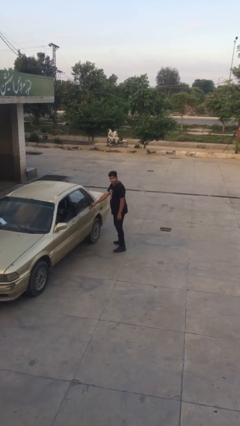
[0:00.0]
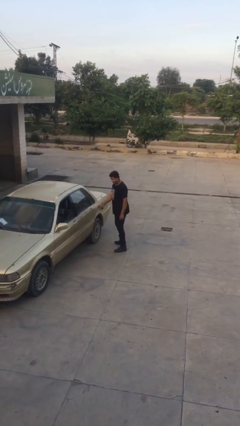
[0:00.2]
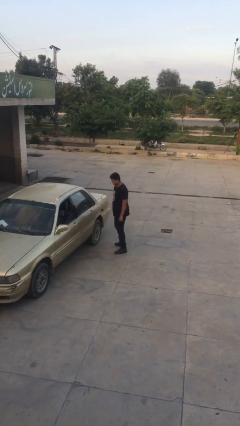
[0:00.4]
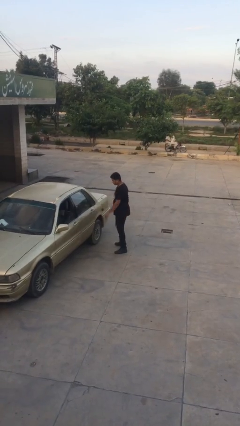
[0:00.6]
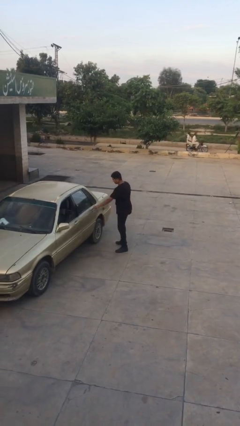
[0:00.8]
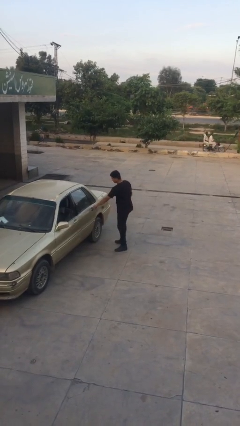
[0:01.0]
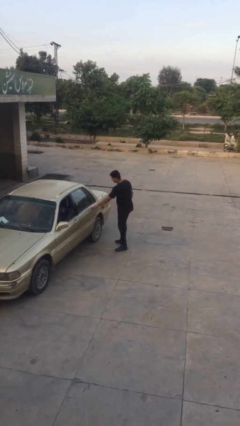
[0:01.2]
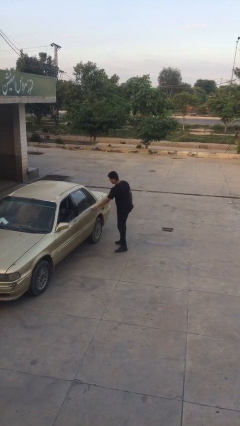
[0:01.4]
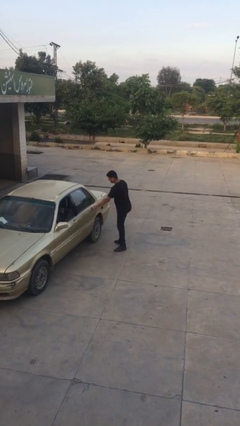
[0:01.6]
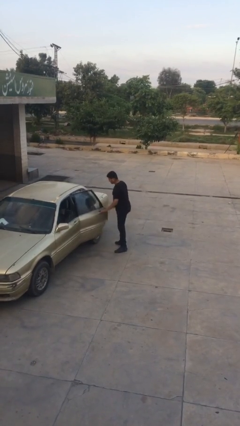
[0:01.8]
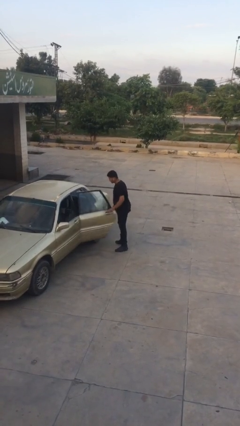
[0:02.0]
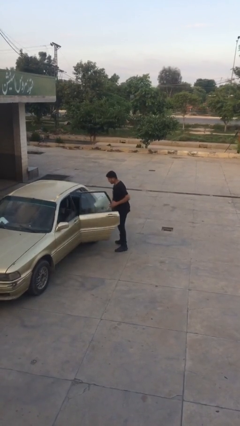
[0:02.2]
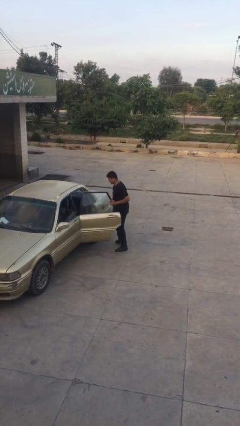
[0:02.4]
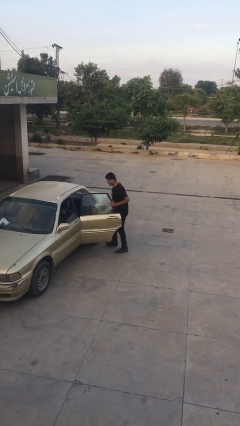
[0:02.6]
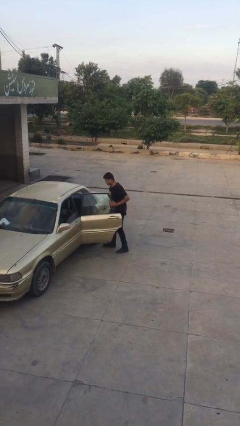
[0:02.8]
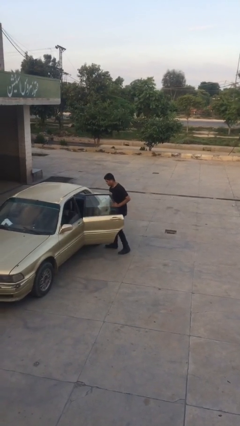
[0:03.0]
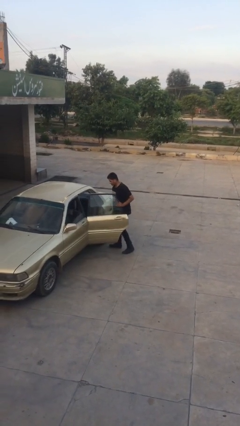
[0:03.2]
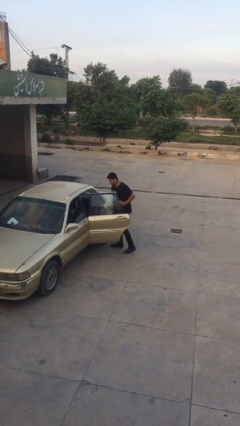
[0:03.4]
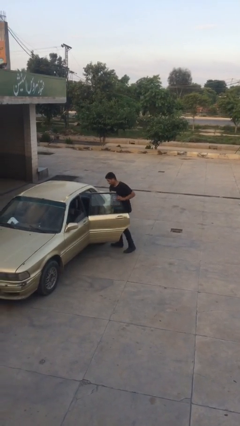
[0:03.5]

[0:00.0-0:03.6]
person opens car door

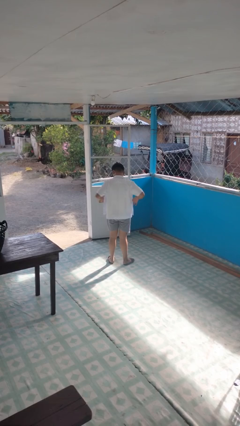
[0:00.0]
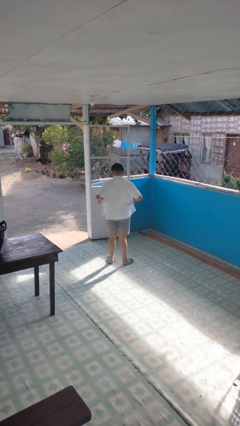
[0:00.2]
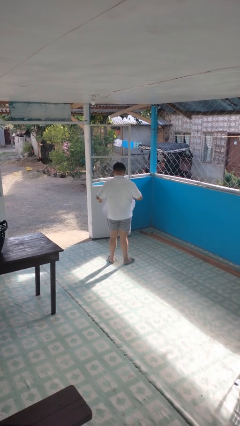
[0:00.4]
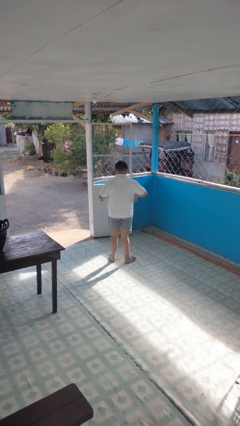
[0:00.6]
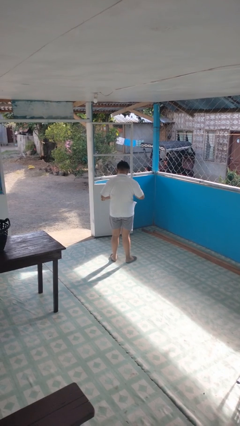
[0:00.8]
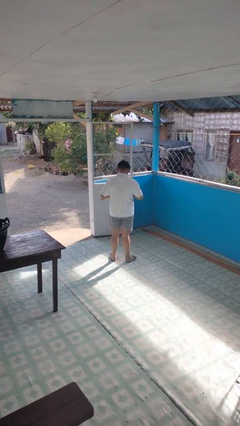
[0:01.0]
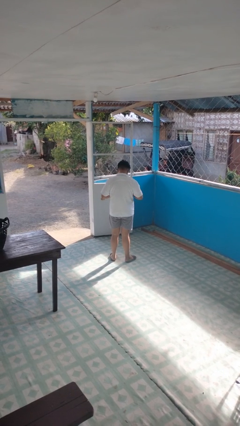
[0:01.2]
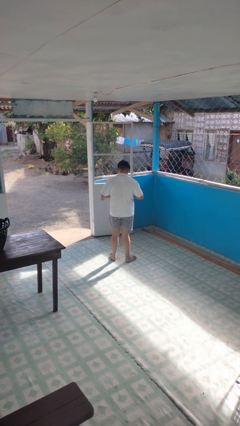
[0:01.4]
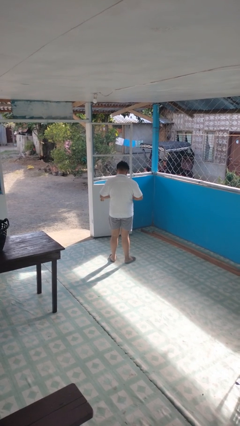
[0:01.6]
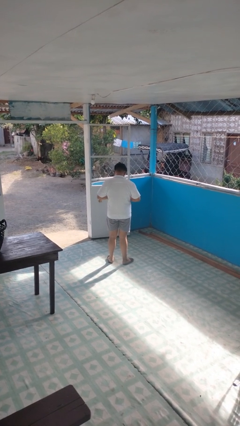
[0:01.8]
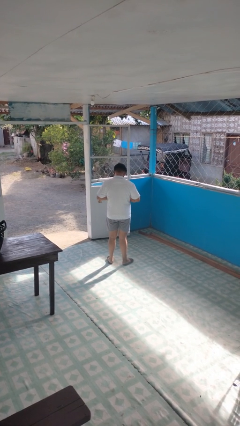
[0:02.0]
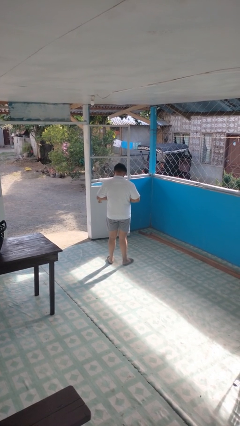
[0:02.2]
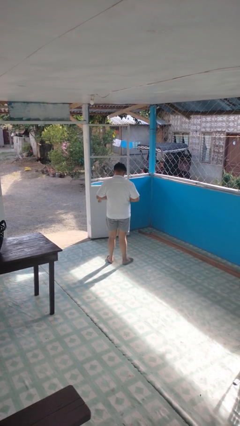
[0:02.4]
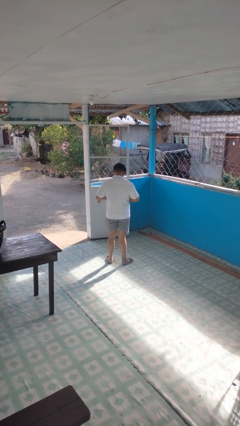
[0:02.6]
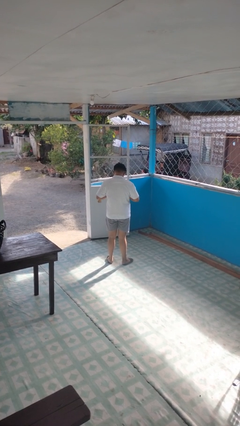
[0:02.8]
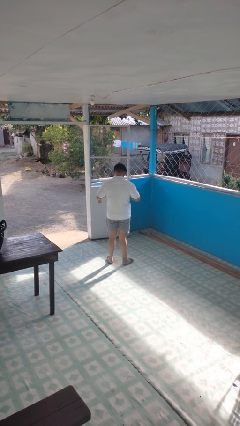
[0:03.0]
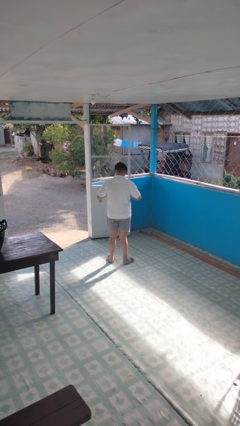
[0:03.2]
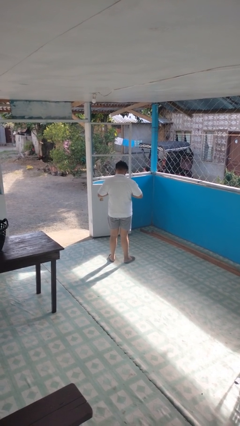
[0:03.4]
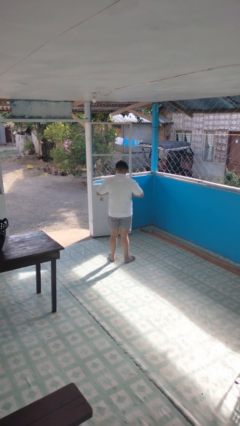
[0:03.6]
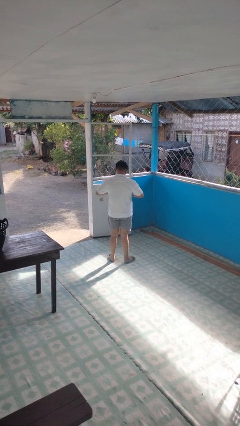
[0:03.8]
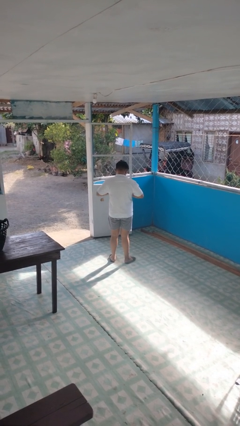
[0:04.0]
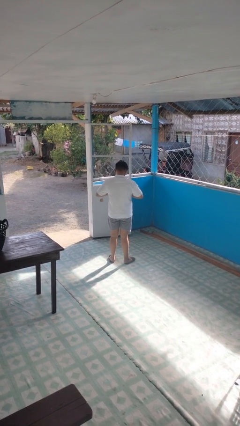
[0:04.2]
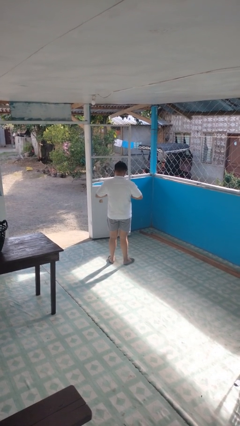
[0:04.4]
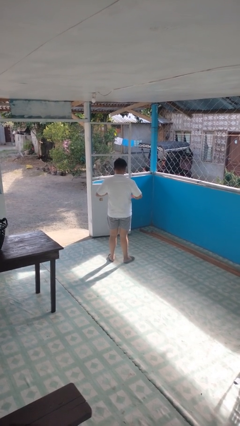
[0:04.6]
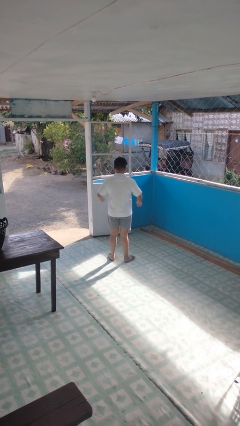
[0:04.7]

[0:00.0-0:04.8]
person buttons shirt

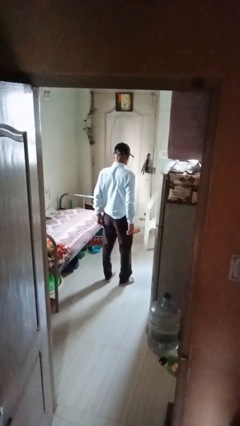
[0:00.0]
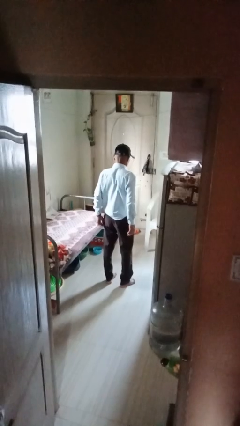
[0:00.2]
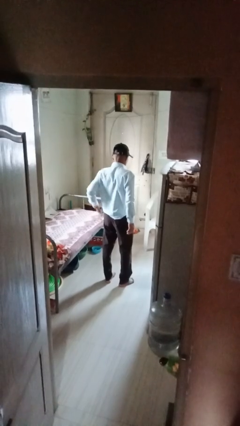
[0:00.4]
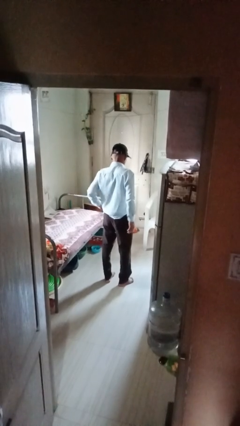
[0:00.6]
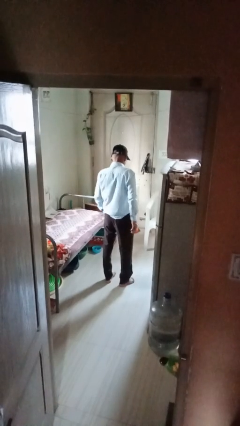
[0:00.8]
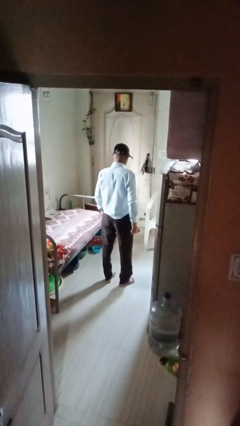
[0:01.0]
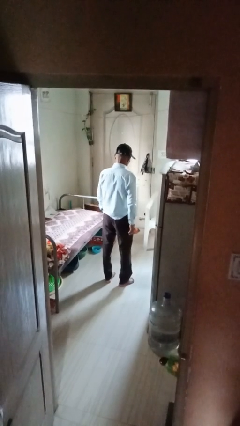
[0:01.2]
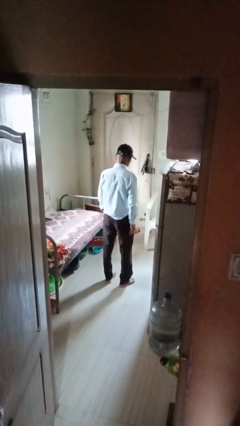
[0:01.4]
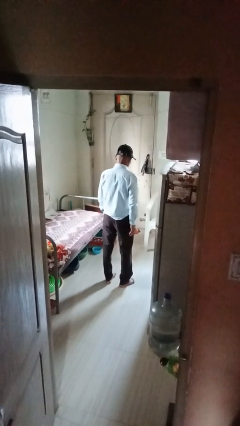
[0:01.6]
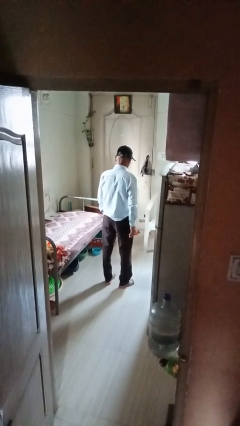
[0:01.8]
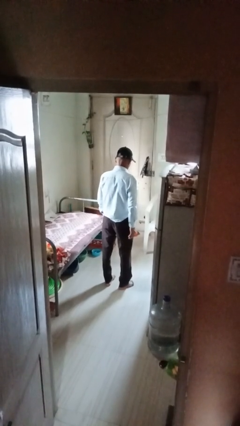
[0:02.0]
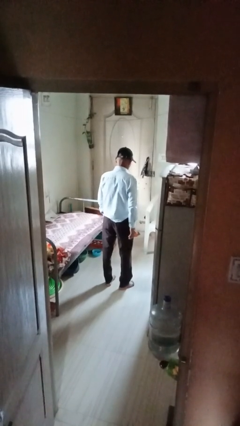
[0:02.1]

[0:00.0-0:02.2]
person puts hands in back pockets

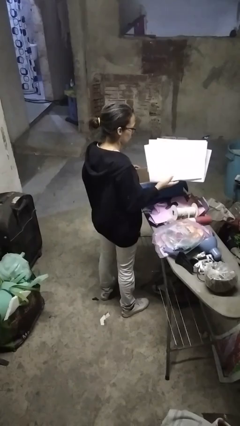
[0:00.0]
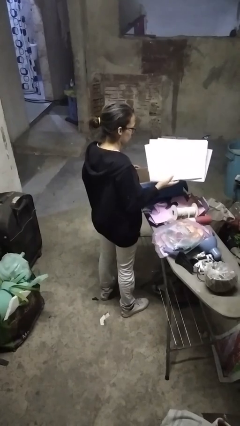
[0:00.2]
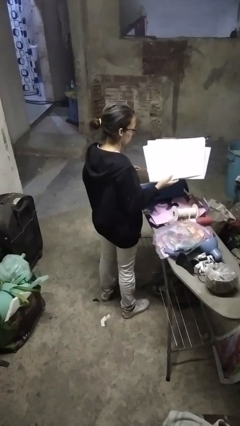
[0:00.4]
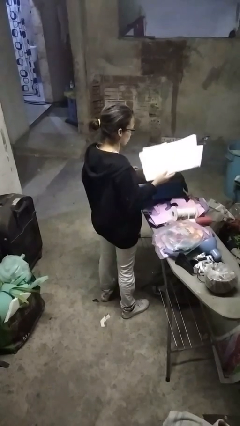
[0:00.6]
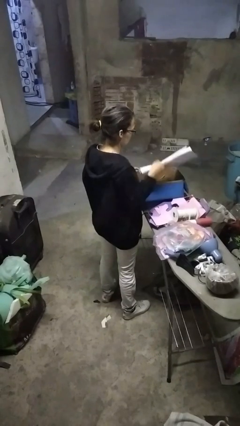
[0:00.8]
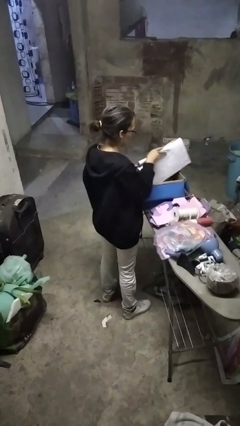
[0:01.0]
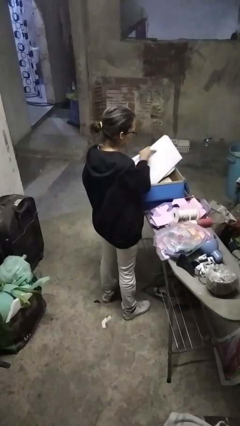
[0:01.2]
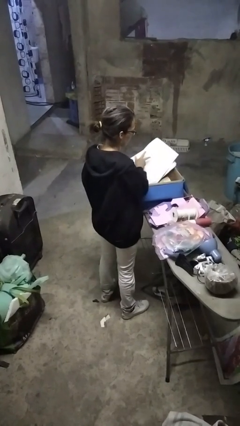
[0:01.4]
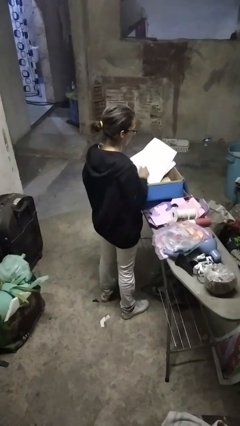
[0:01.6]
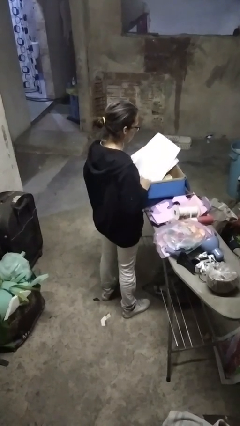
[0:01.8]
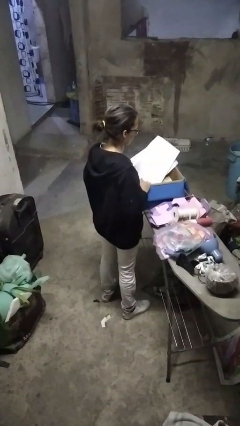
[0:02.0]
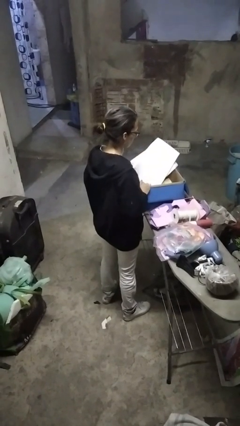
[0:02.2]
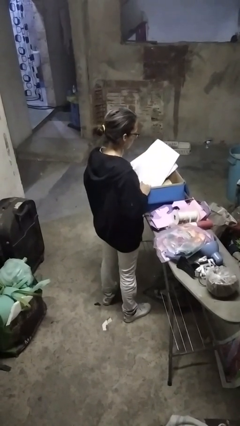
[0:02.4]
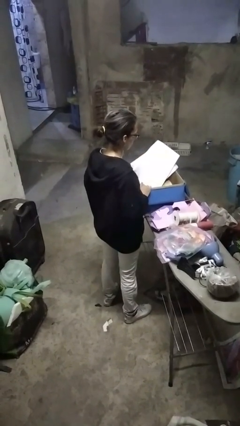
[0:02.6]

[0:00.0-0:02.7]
person puts object into box

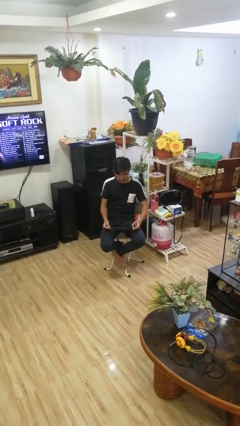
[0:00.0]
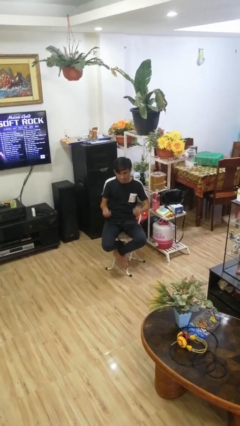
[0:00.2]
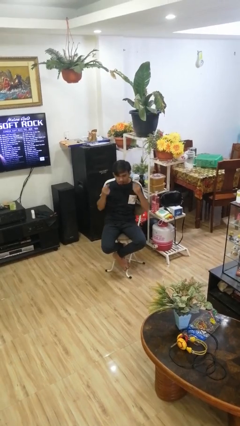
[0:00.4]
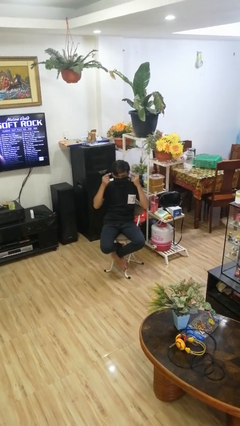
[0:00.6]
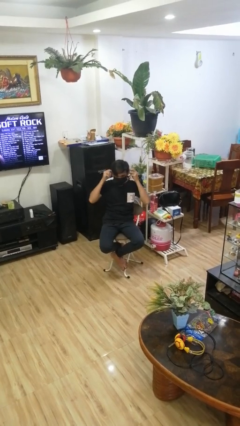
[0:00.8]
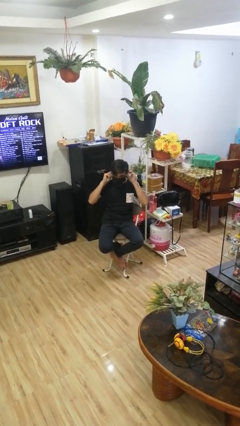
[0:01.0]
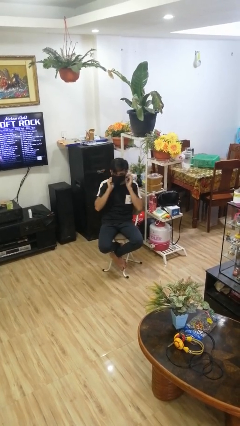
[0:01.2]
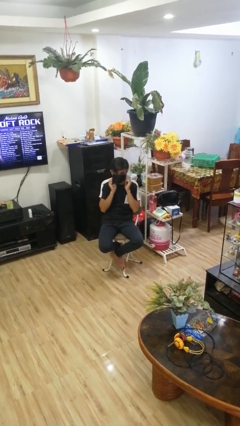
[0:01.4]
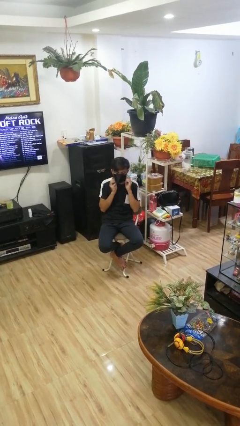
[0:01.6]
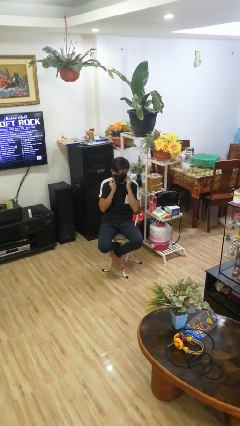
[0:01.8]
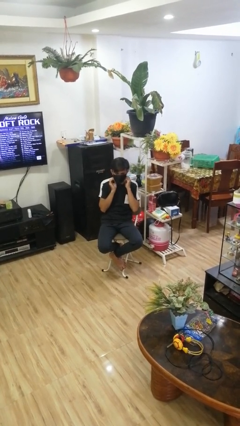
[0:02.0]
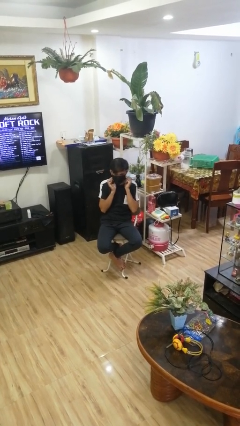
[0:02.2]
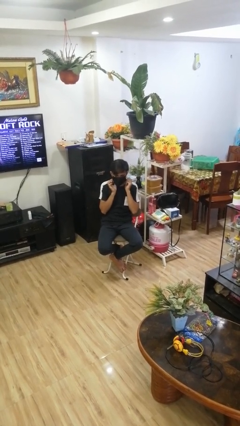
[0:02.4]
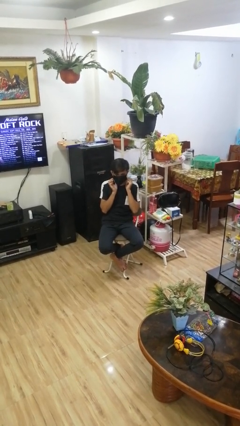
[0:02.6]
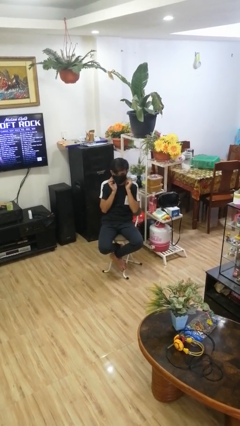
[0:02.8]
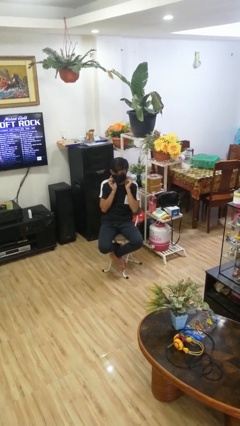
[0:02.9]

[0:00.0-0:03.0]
person puts on facemask

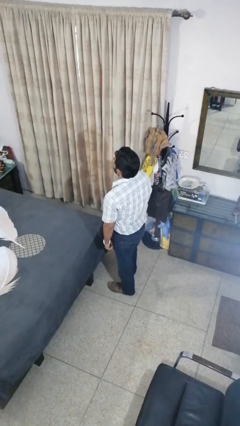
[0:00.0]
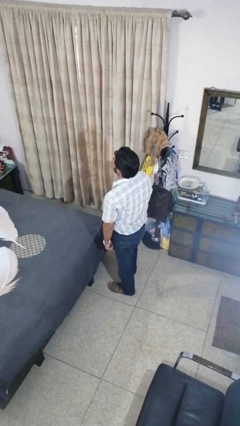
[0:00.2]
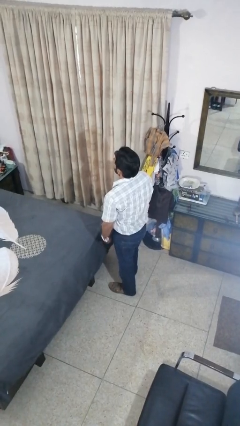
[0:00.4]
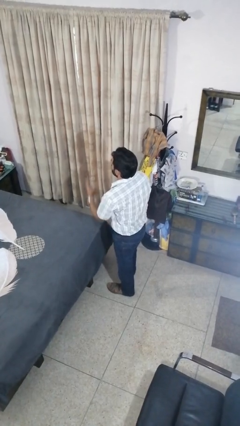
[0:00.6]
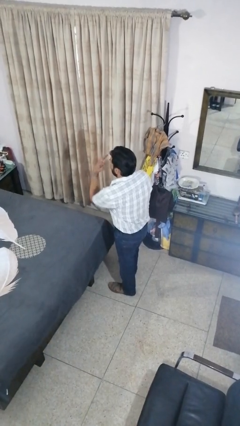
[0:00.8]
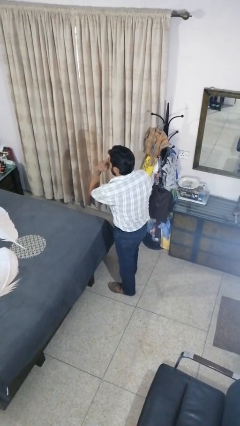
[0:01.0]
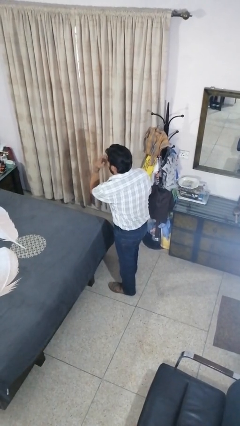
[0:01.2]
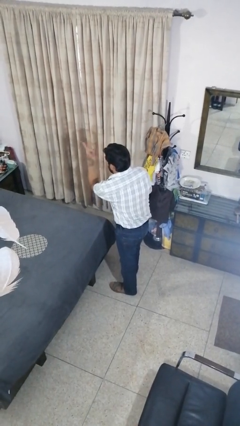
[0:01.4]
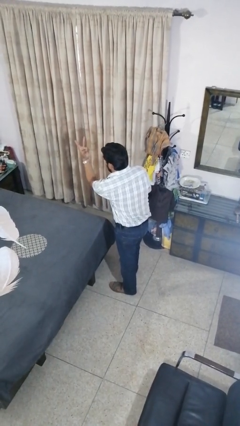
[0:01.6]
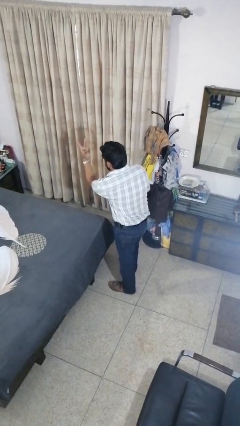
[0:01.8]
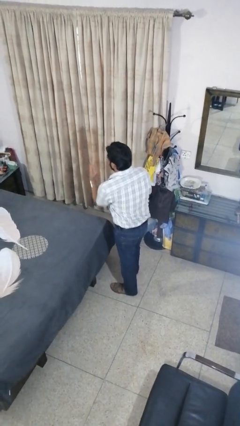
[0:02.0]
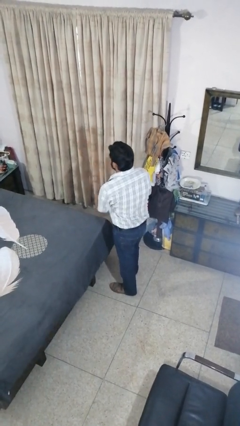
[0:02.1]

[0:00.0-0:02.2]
person gestures watch closely
